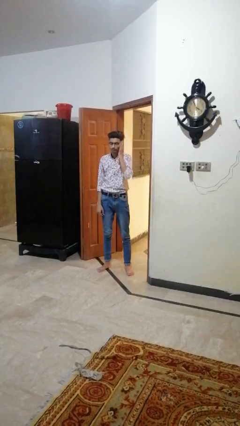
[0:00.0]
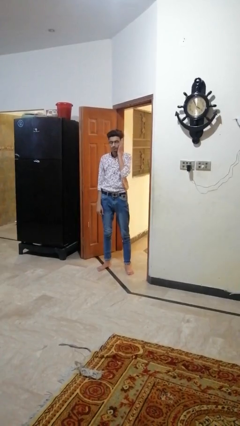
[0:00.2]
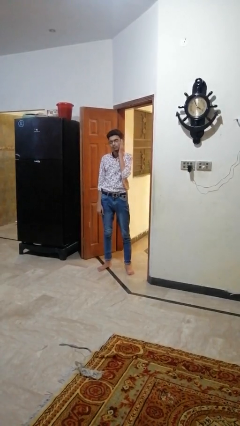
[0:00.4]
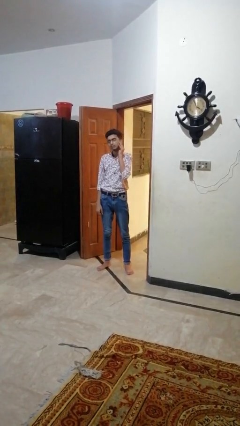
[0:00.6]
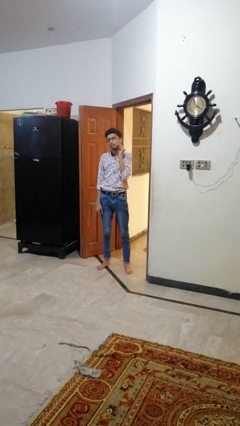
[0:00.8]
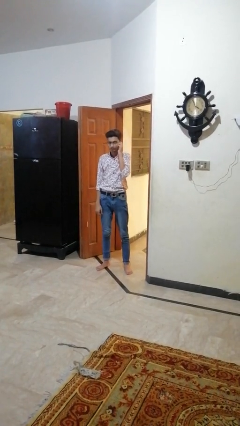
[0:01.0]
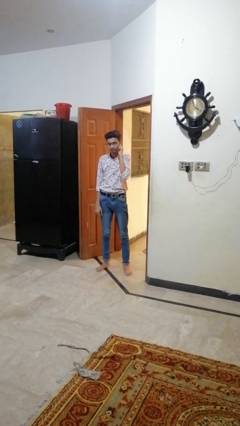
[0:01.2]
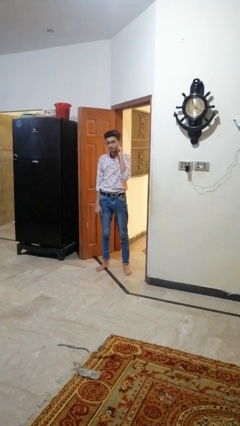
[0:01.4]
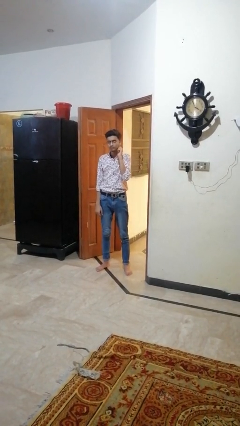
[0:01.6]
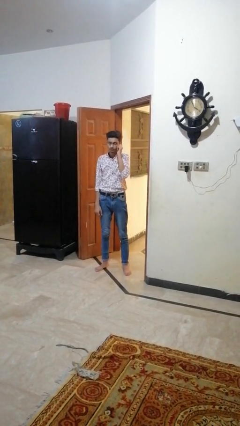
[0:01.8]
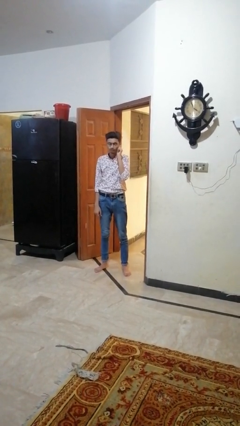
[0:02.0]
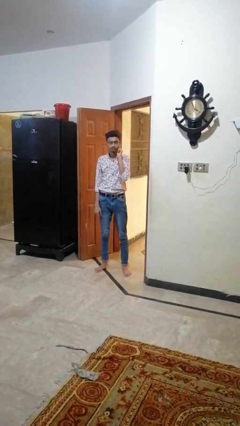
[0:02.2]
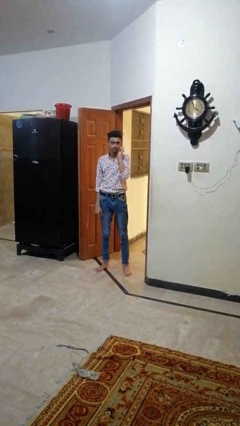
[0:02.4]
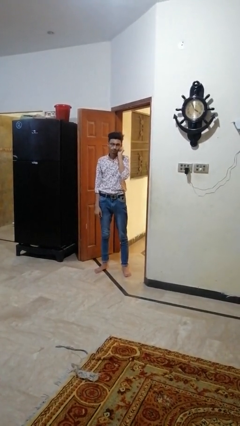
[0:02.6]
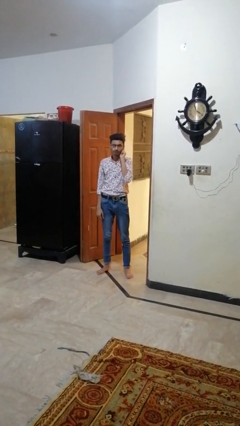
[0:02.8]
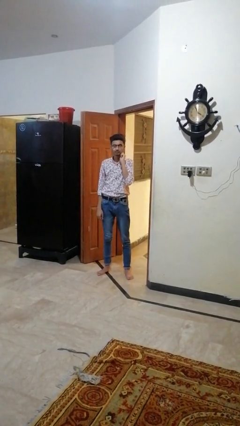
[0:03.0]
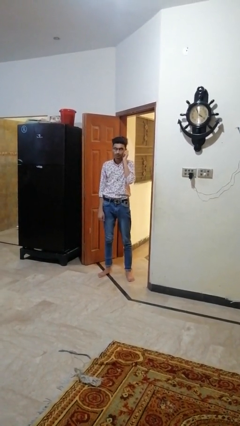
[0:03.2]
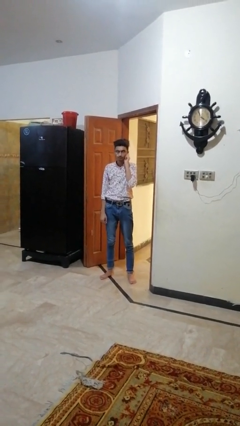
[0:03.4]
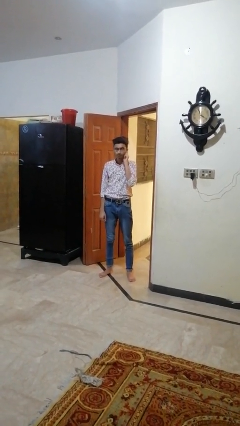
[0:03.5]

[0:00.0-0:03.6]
person touches earlobe

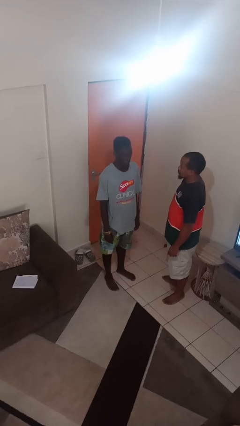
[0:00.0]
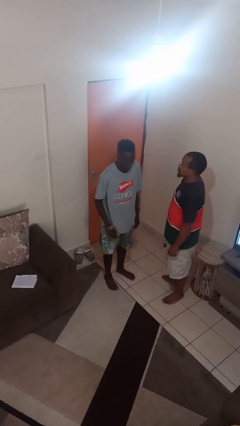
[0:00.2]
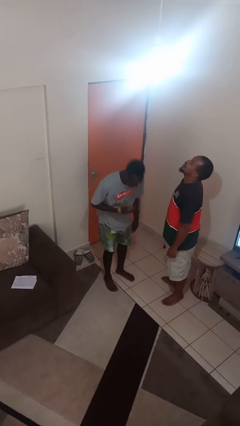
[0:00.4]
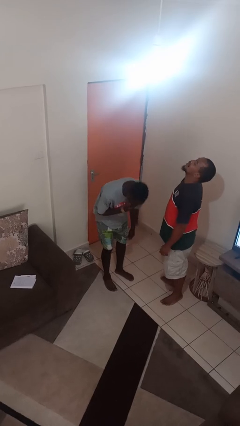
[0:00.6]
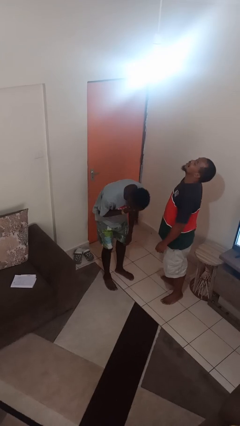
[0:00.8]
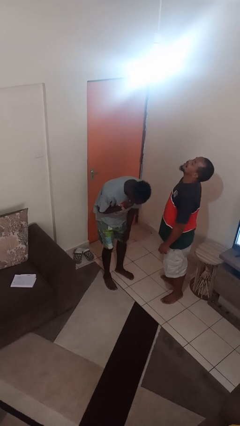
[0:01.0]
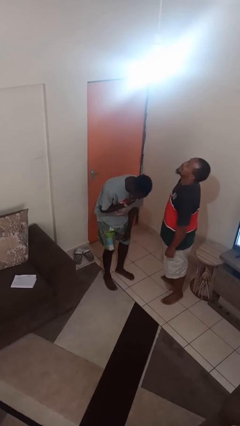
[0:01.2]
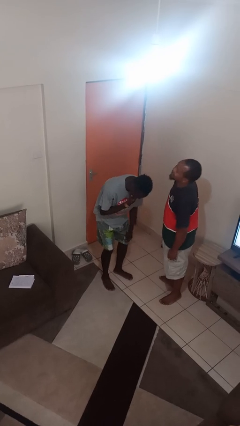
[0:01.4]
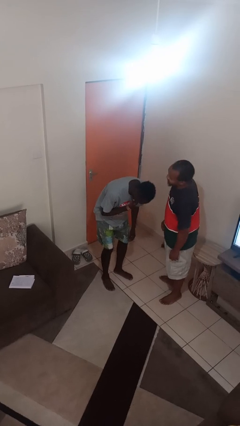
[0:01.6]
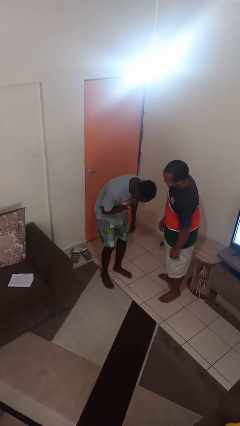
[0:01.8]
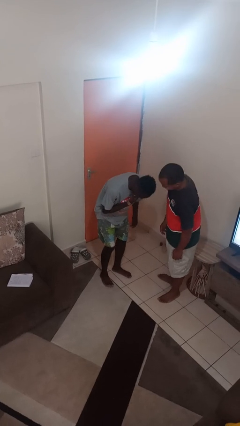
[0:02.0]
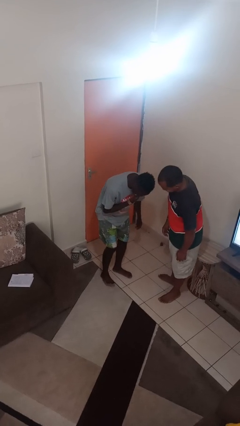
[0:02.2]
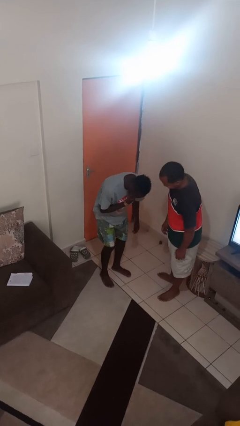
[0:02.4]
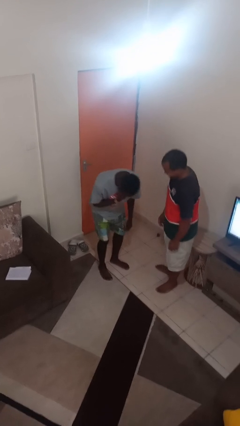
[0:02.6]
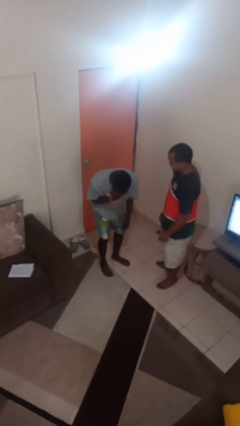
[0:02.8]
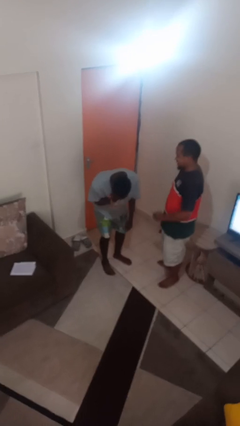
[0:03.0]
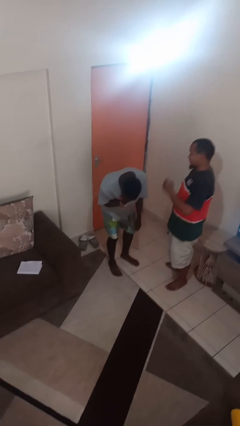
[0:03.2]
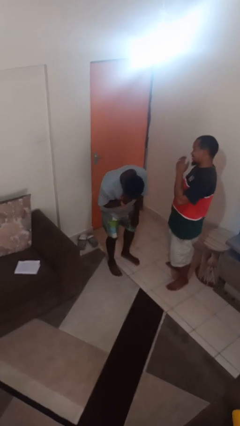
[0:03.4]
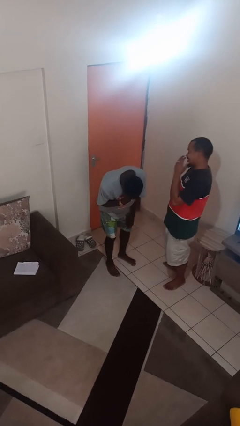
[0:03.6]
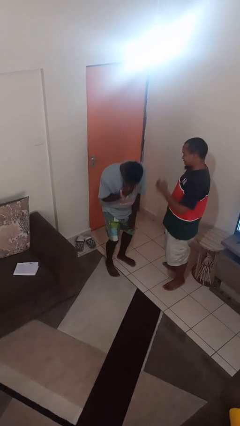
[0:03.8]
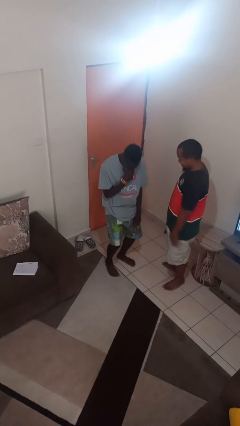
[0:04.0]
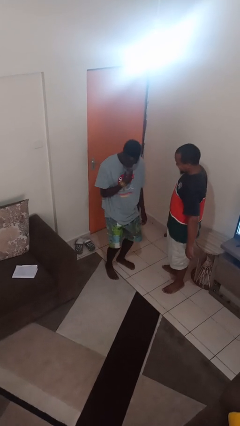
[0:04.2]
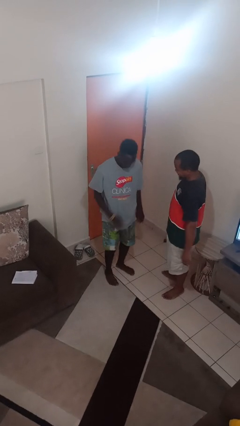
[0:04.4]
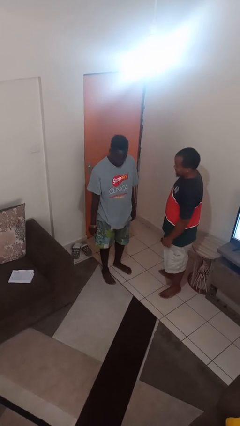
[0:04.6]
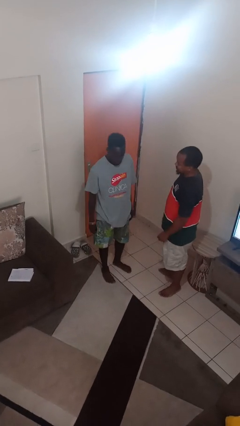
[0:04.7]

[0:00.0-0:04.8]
person laughs with person

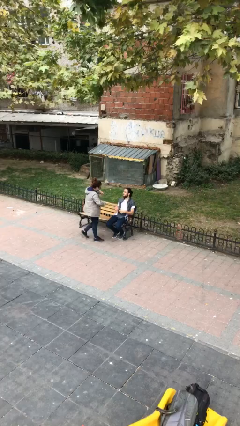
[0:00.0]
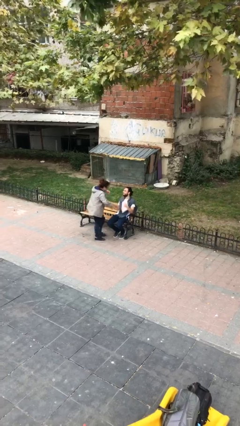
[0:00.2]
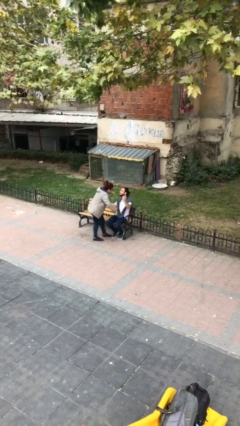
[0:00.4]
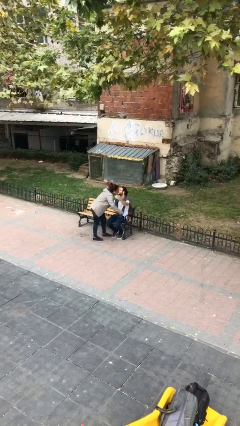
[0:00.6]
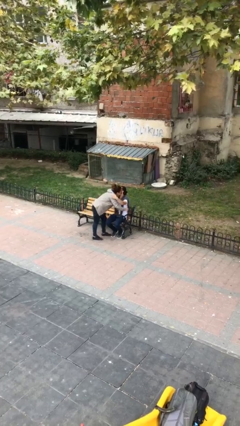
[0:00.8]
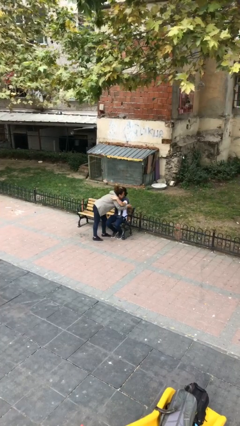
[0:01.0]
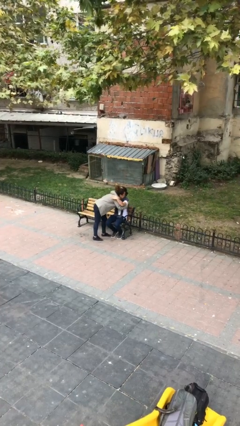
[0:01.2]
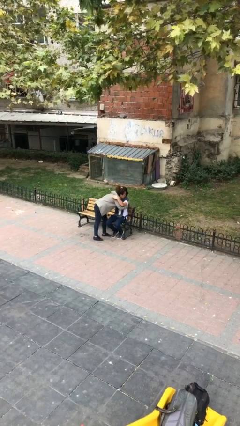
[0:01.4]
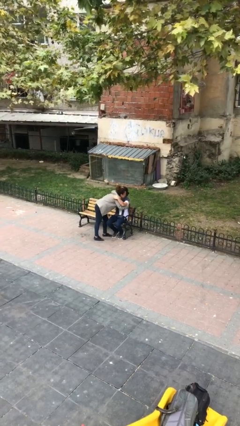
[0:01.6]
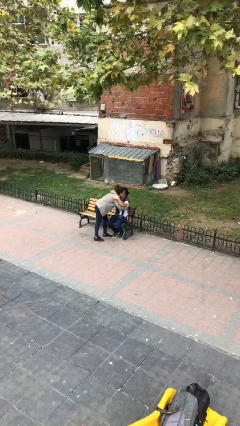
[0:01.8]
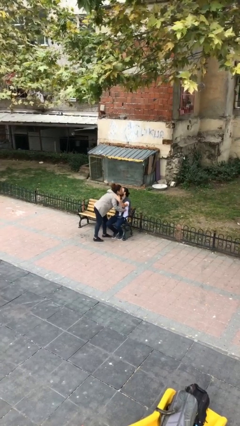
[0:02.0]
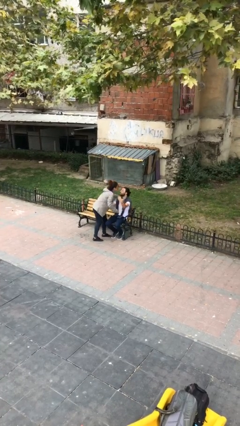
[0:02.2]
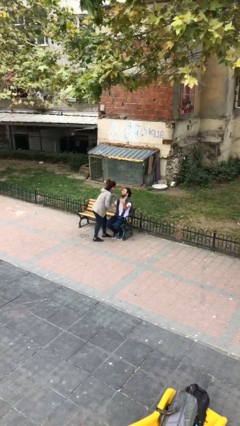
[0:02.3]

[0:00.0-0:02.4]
person embraces person

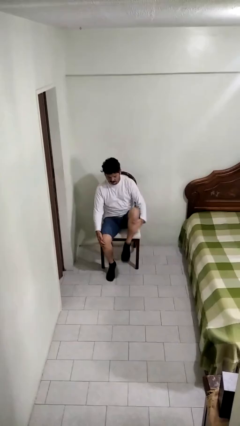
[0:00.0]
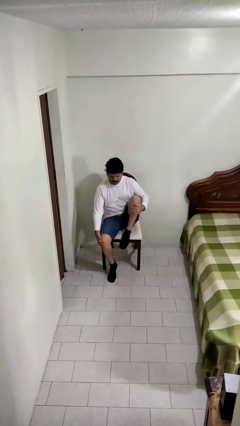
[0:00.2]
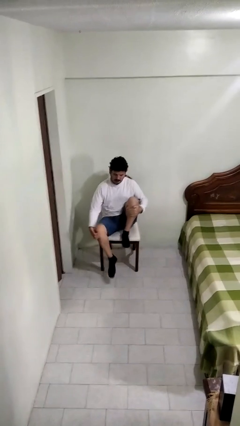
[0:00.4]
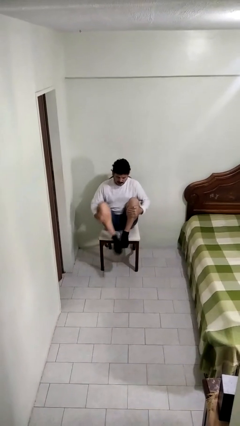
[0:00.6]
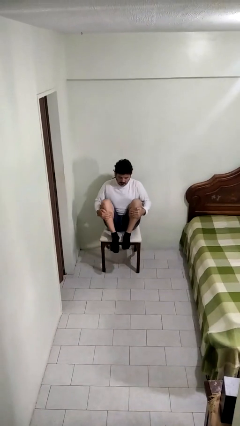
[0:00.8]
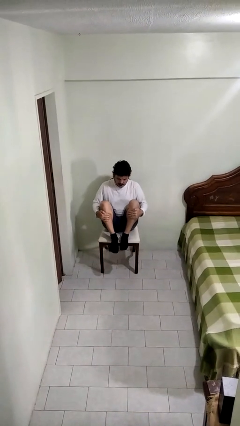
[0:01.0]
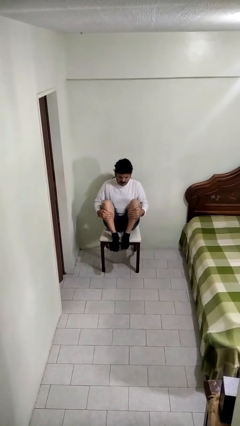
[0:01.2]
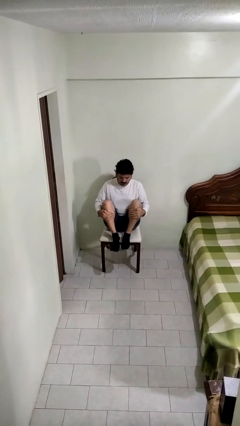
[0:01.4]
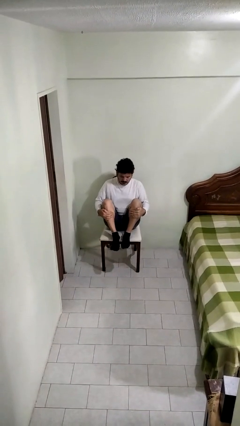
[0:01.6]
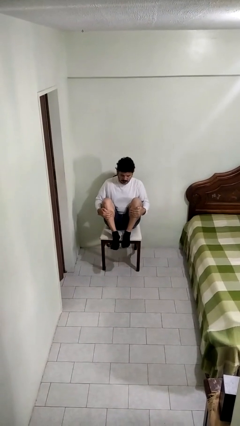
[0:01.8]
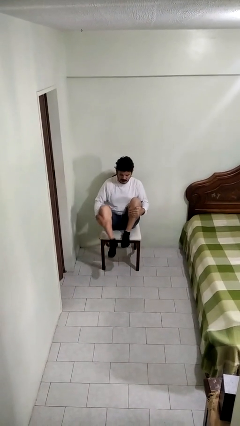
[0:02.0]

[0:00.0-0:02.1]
person puts feet up

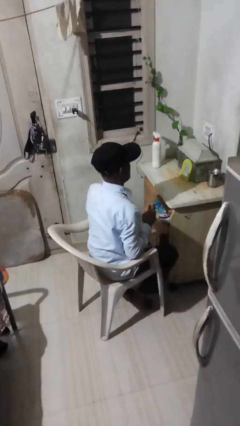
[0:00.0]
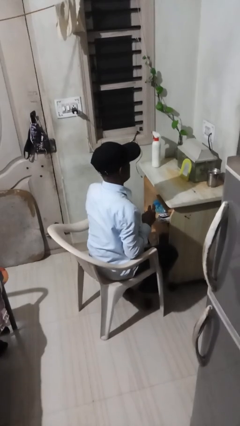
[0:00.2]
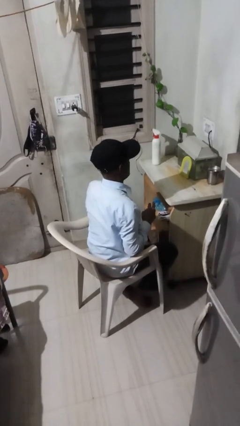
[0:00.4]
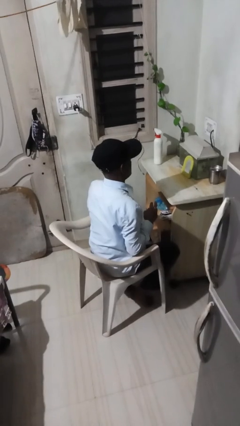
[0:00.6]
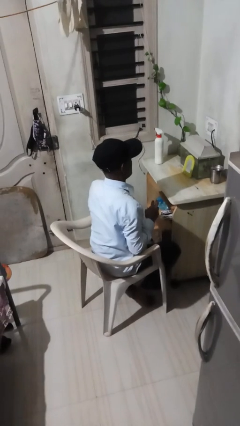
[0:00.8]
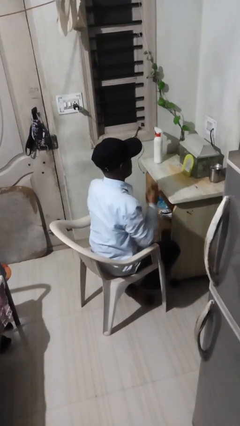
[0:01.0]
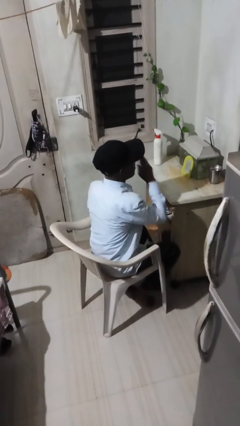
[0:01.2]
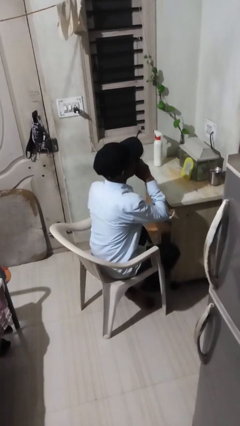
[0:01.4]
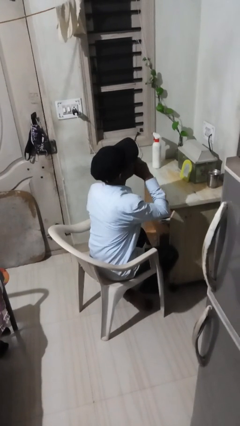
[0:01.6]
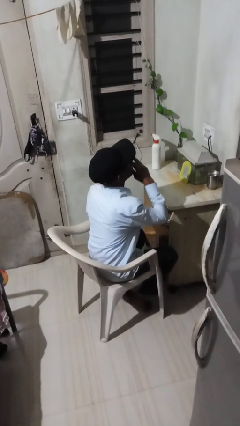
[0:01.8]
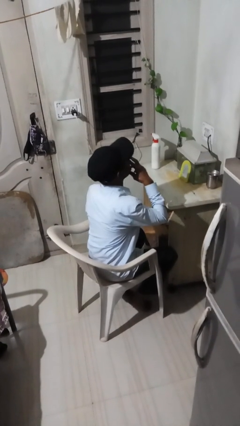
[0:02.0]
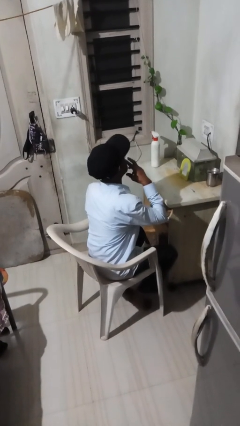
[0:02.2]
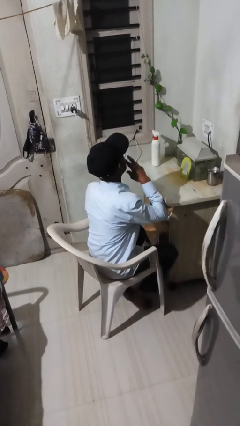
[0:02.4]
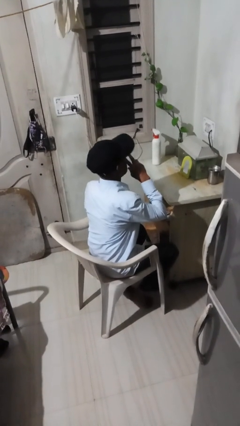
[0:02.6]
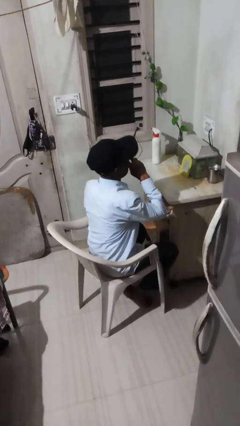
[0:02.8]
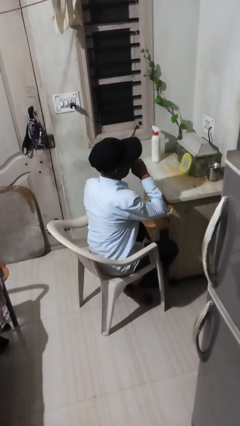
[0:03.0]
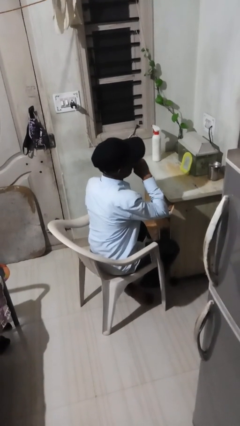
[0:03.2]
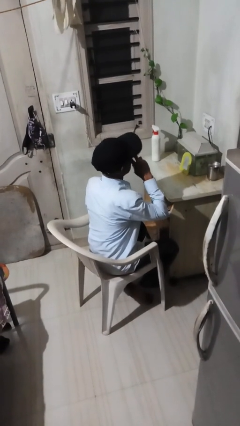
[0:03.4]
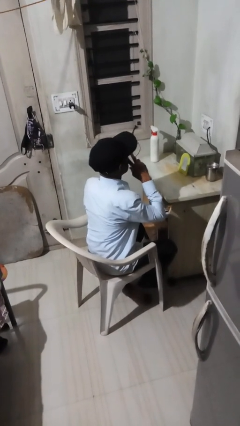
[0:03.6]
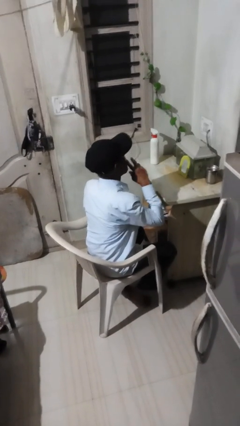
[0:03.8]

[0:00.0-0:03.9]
person licks fingers

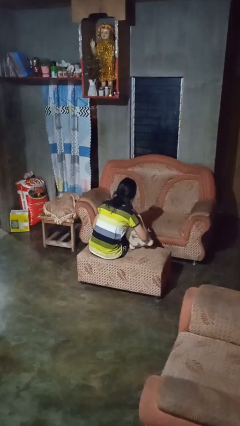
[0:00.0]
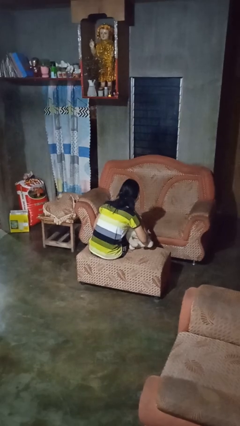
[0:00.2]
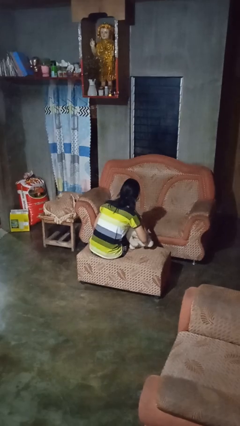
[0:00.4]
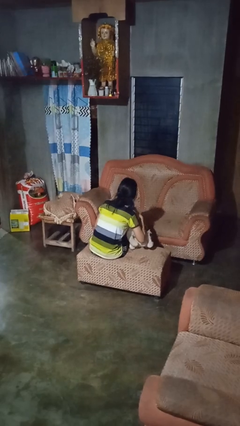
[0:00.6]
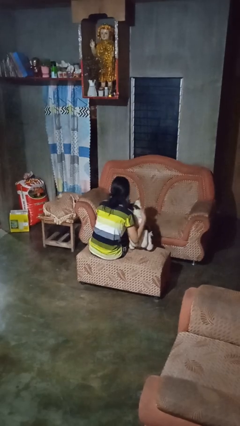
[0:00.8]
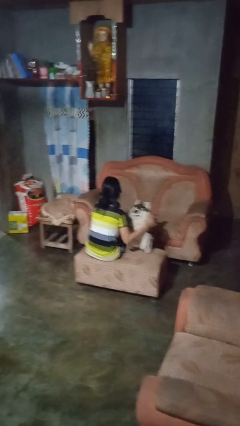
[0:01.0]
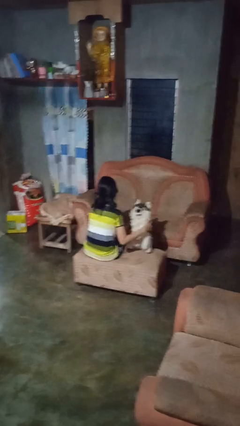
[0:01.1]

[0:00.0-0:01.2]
person hugs stuffed animal
